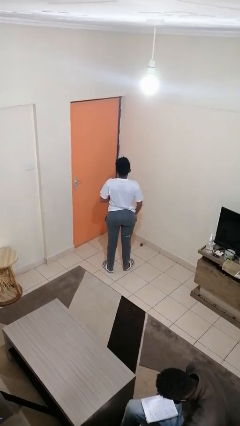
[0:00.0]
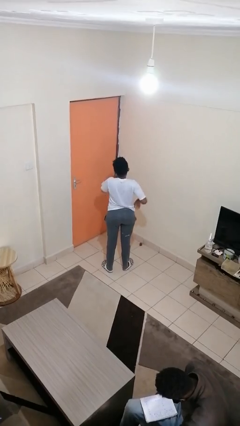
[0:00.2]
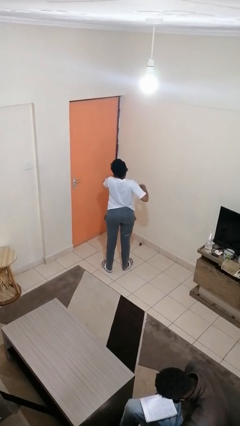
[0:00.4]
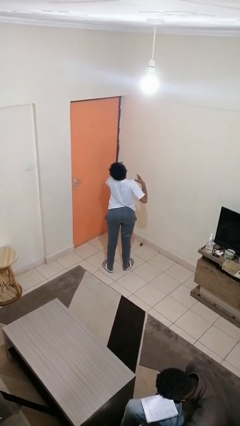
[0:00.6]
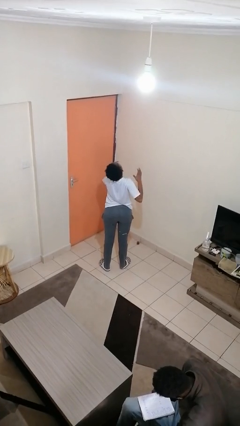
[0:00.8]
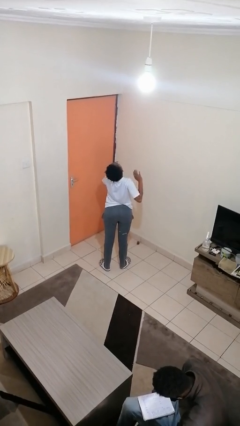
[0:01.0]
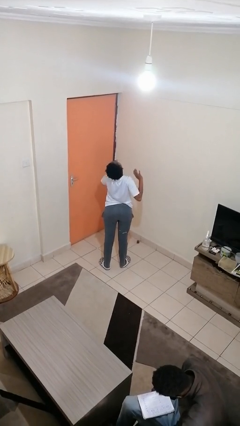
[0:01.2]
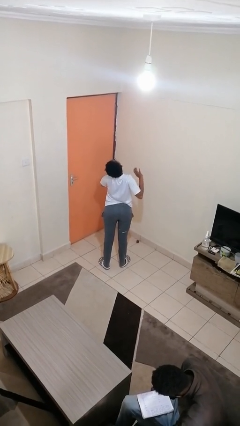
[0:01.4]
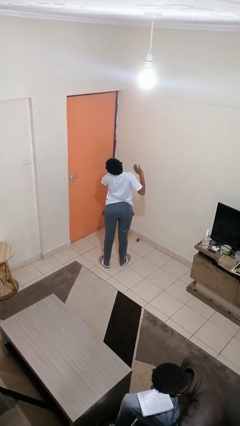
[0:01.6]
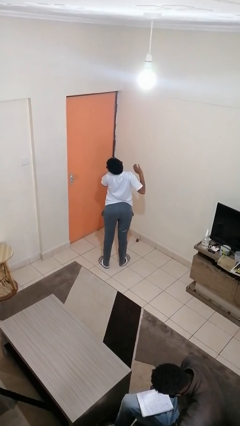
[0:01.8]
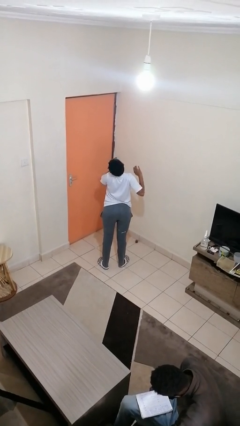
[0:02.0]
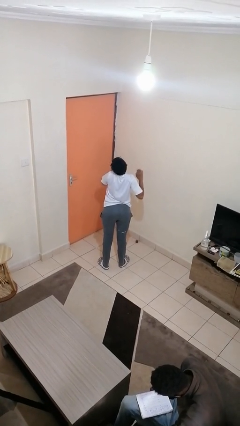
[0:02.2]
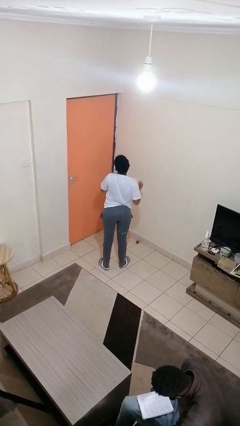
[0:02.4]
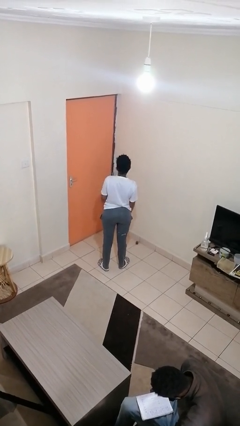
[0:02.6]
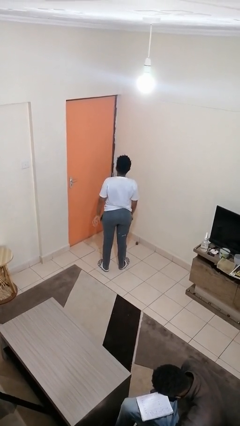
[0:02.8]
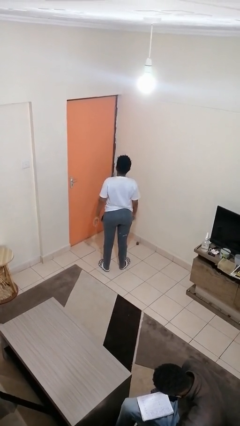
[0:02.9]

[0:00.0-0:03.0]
person yawns

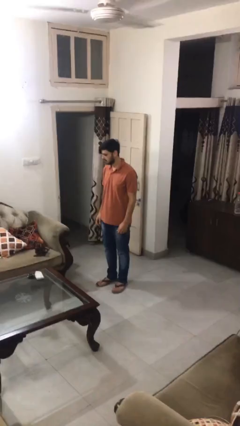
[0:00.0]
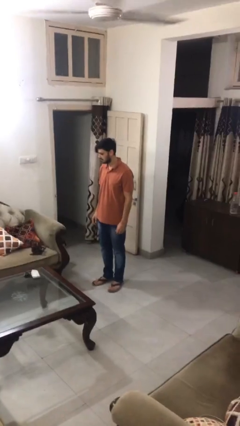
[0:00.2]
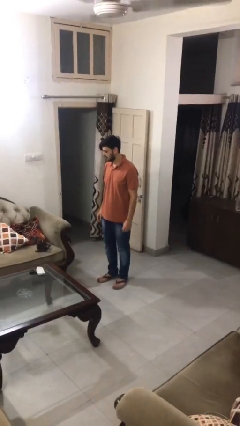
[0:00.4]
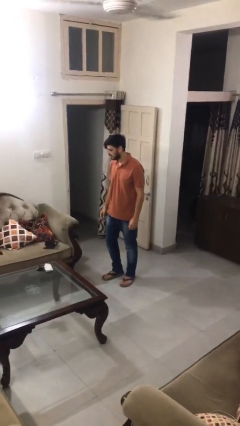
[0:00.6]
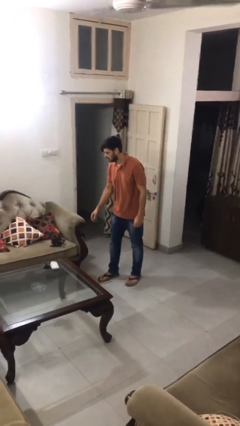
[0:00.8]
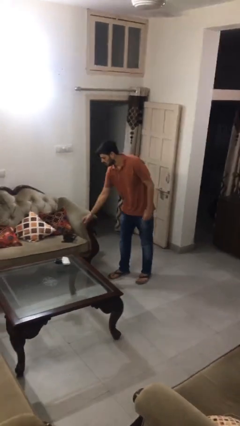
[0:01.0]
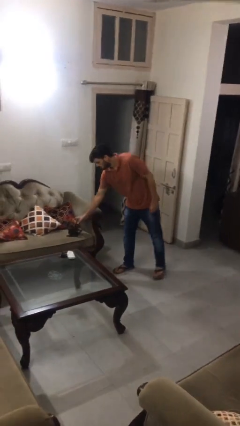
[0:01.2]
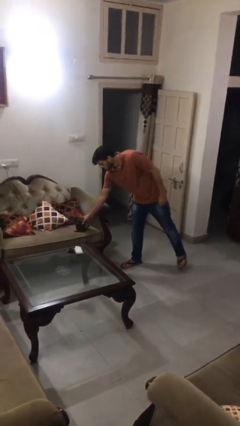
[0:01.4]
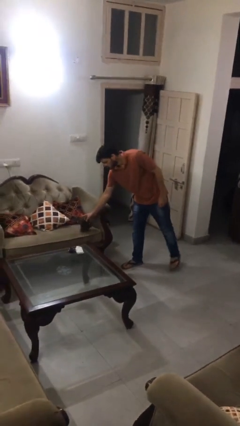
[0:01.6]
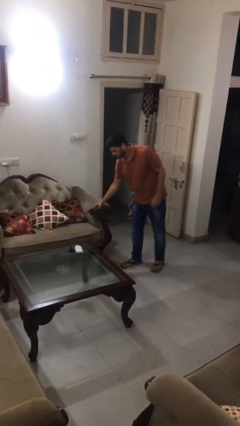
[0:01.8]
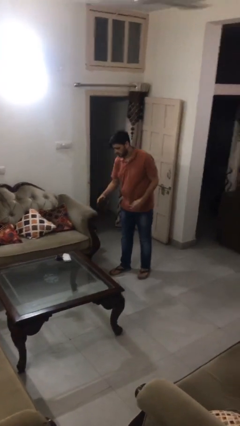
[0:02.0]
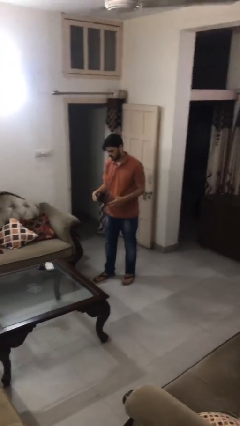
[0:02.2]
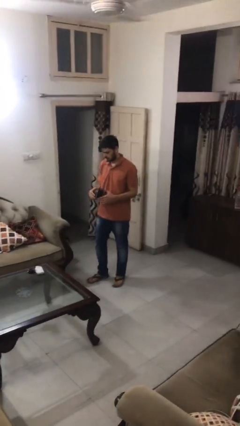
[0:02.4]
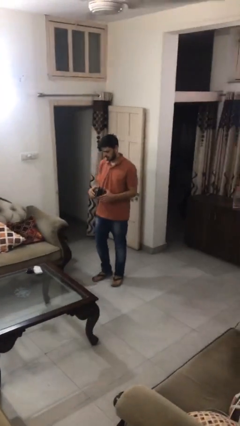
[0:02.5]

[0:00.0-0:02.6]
person picks up object from couch

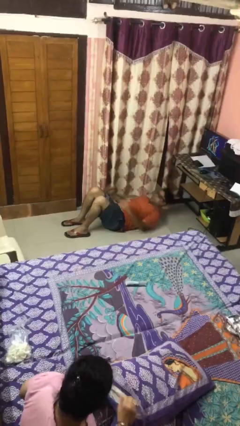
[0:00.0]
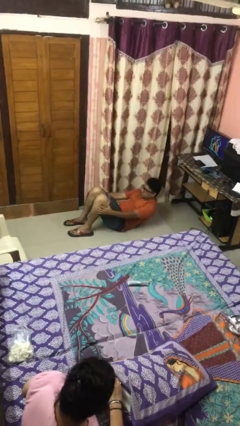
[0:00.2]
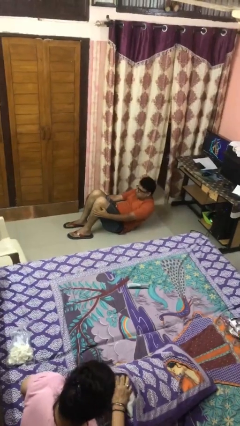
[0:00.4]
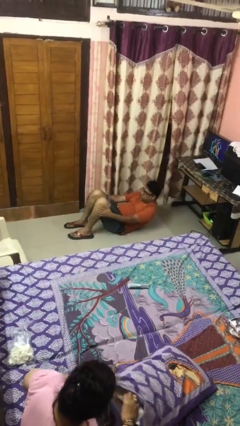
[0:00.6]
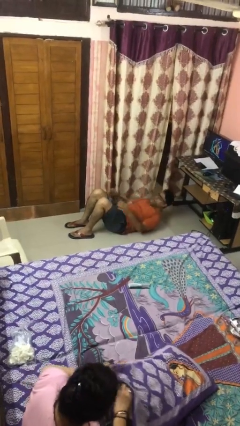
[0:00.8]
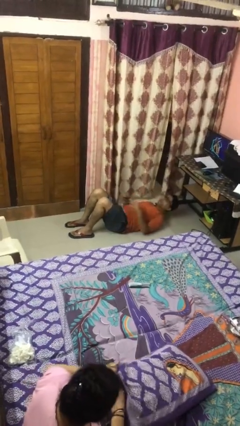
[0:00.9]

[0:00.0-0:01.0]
person exercises with situp

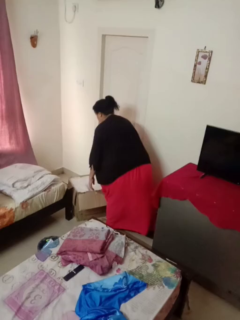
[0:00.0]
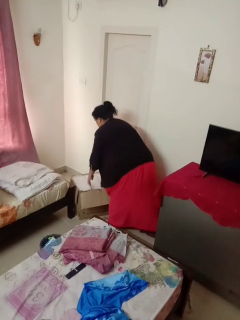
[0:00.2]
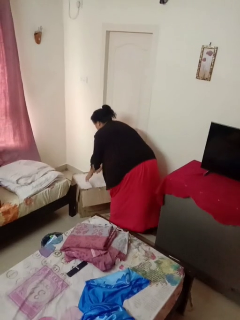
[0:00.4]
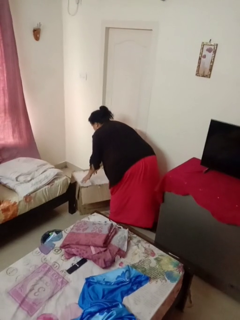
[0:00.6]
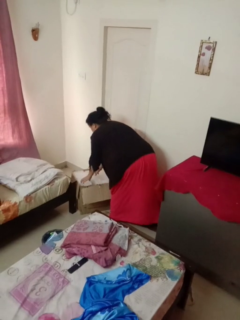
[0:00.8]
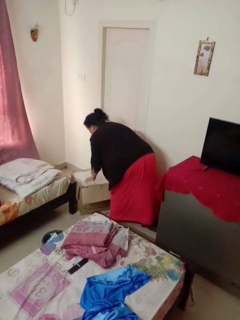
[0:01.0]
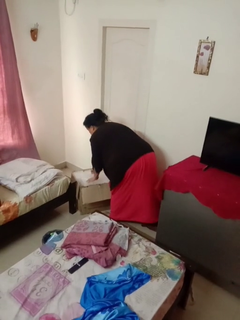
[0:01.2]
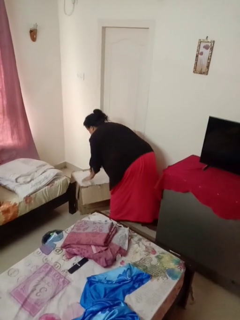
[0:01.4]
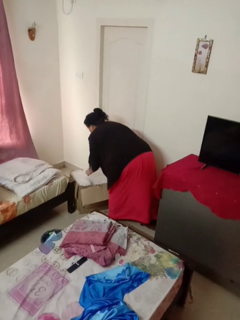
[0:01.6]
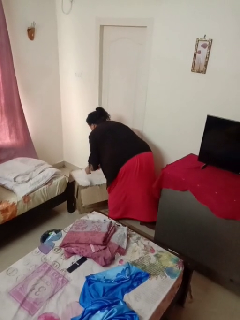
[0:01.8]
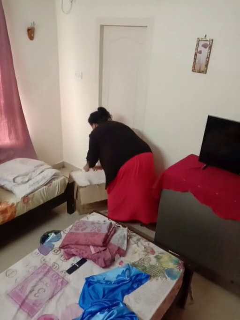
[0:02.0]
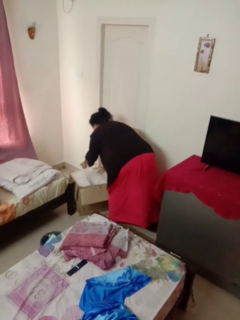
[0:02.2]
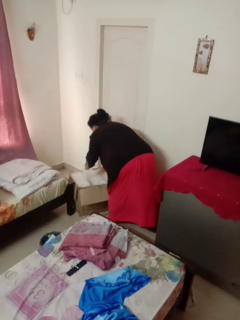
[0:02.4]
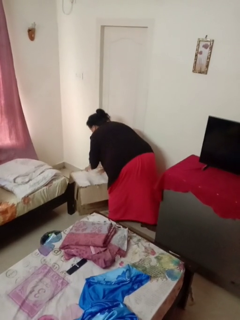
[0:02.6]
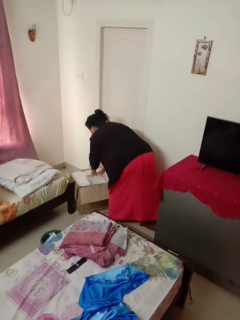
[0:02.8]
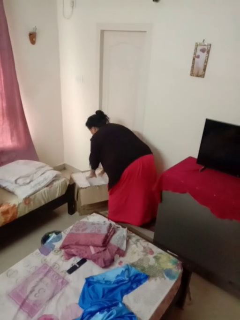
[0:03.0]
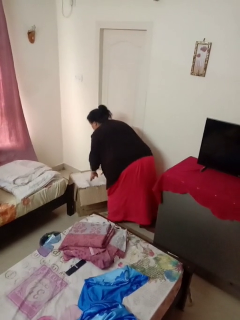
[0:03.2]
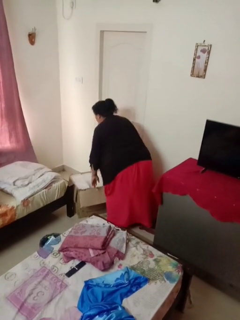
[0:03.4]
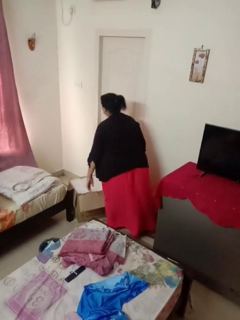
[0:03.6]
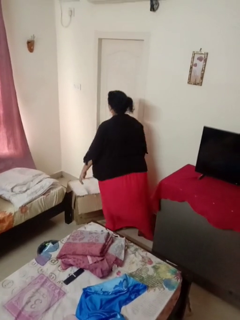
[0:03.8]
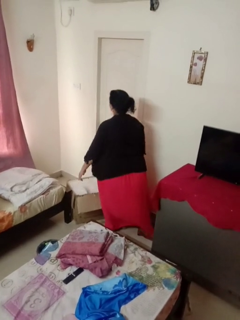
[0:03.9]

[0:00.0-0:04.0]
person searches in box

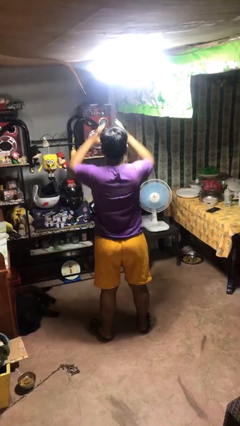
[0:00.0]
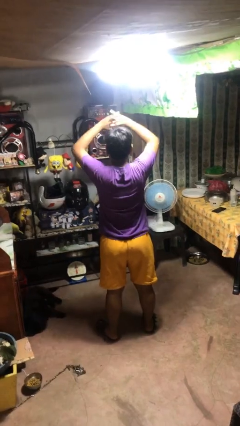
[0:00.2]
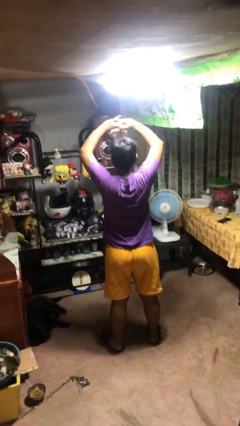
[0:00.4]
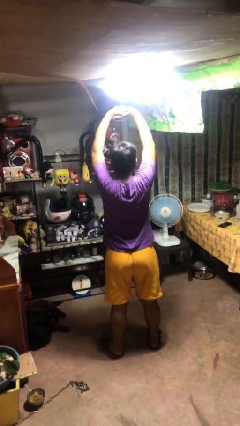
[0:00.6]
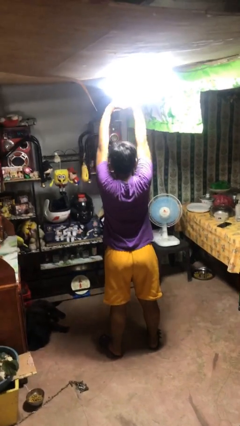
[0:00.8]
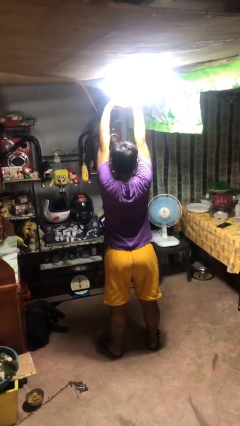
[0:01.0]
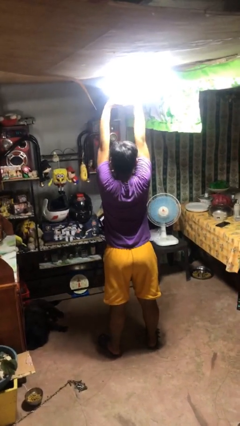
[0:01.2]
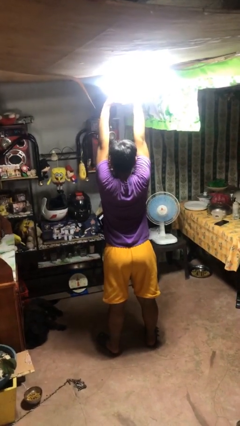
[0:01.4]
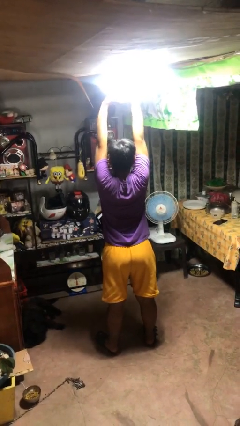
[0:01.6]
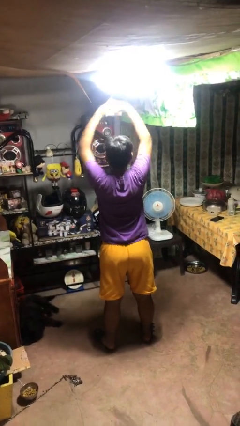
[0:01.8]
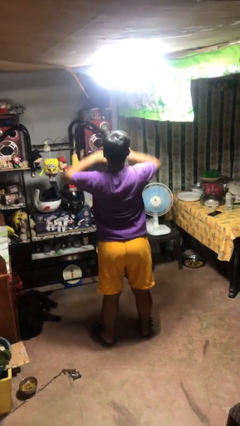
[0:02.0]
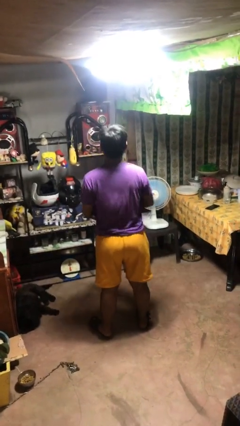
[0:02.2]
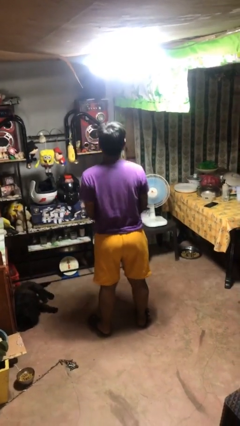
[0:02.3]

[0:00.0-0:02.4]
person stretches arms over head

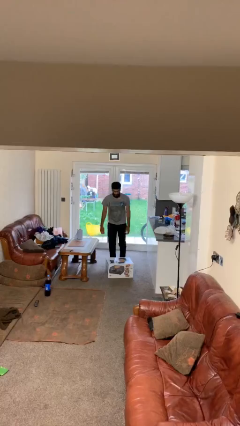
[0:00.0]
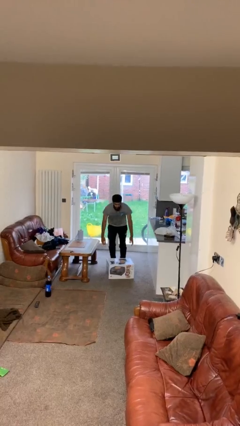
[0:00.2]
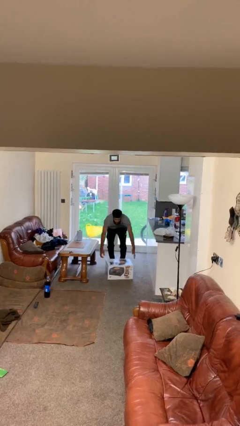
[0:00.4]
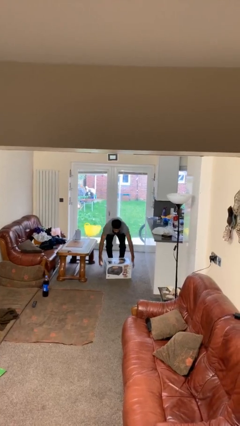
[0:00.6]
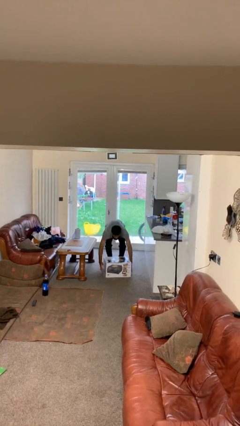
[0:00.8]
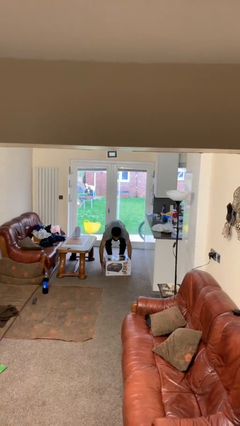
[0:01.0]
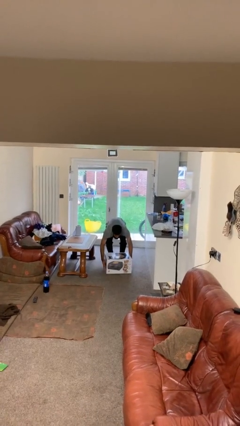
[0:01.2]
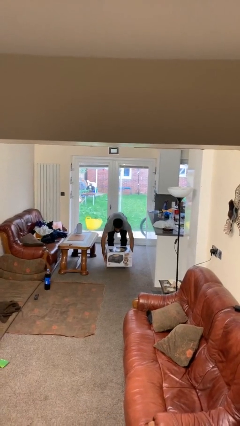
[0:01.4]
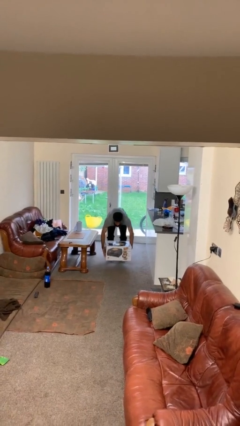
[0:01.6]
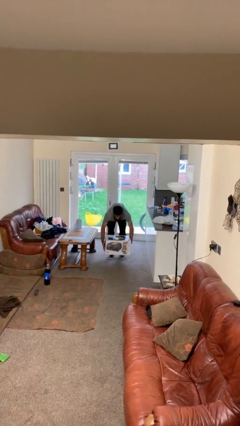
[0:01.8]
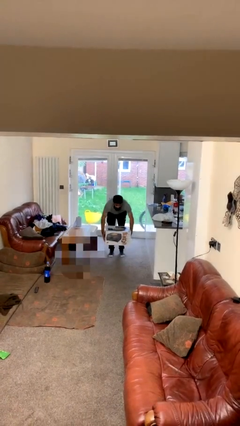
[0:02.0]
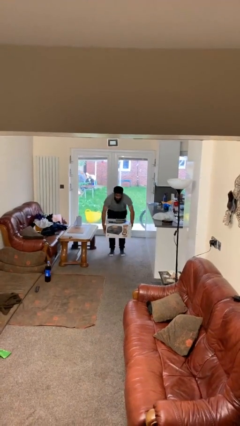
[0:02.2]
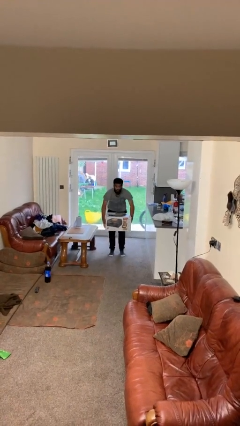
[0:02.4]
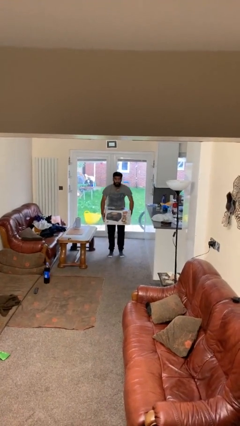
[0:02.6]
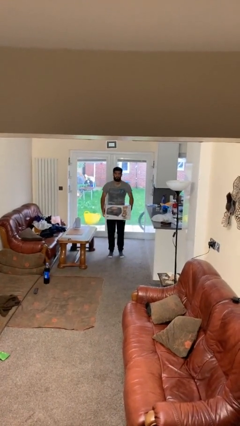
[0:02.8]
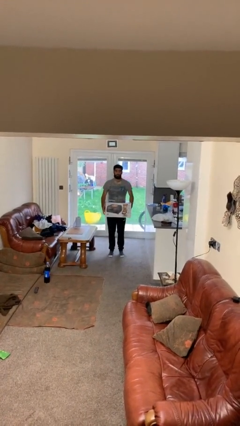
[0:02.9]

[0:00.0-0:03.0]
person picks up object from floor

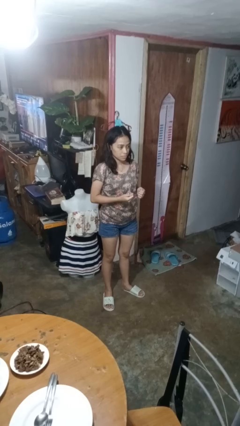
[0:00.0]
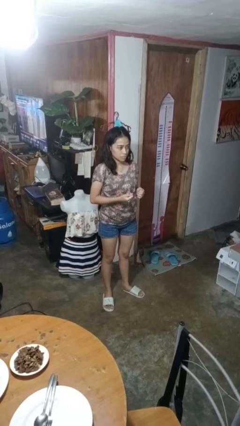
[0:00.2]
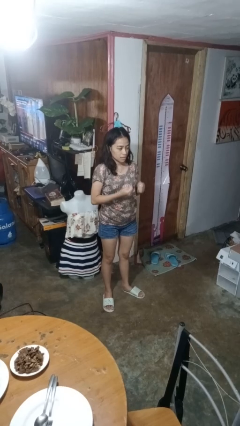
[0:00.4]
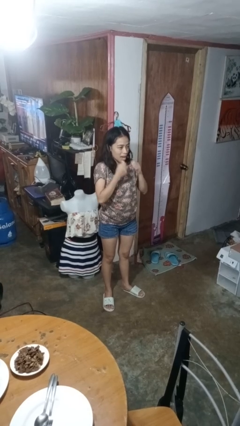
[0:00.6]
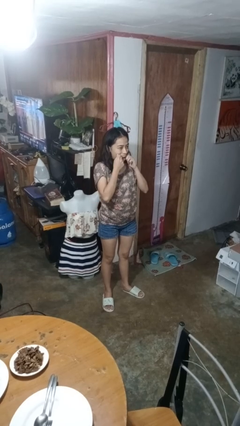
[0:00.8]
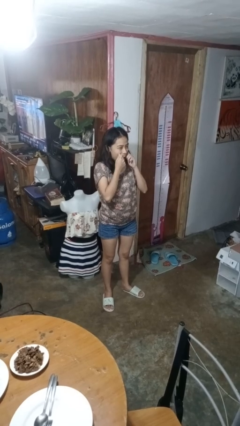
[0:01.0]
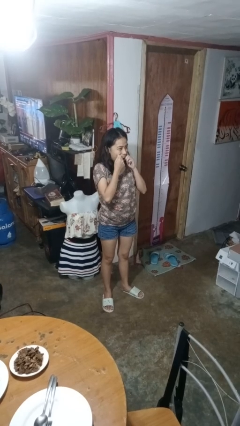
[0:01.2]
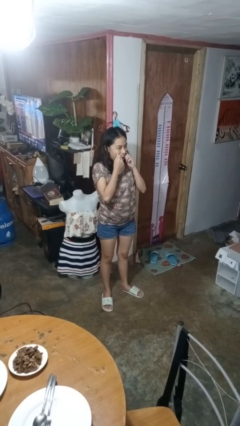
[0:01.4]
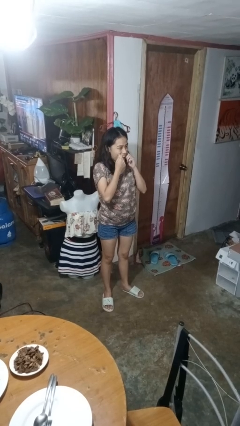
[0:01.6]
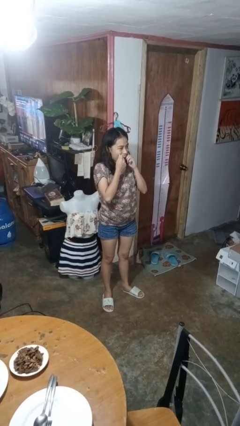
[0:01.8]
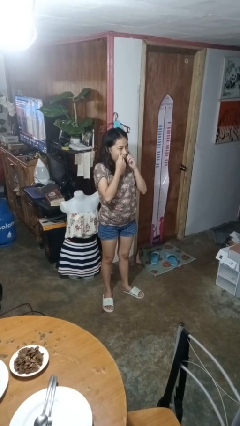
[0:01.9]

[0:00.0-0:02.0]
person flosses

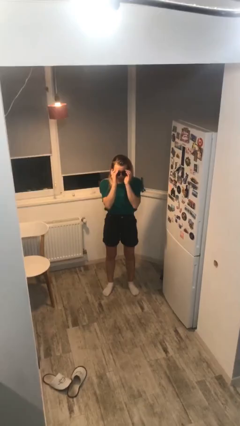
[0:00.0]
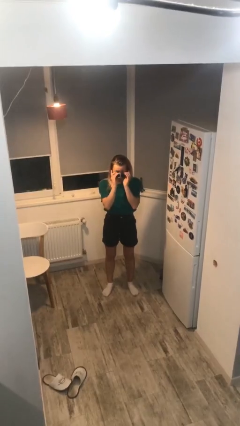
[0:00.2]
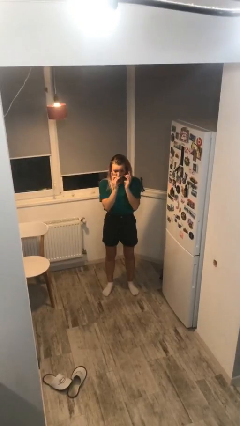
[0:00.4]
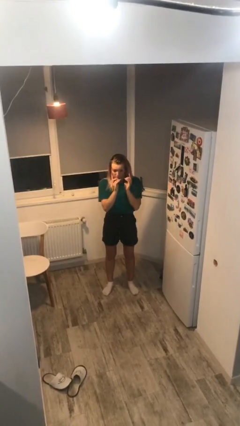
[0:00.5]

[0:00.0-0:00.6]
person takes off glasses
